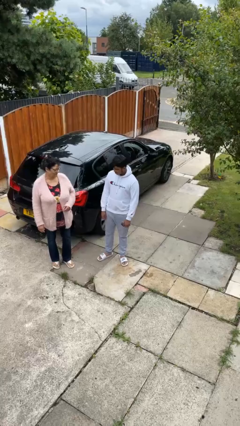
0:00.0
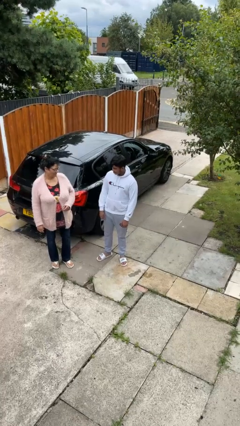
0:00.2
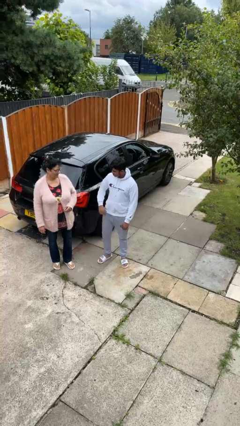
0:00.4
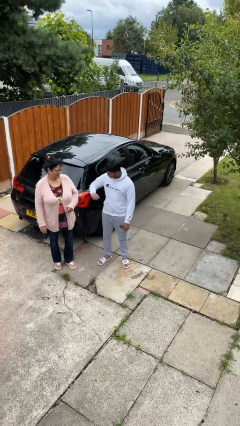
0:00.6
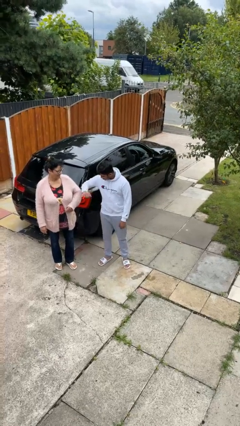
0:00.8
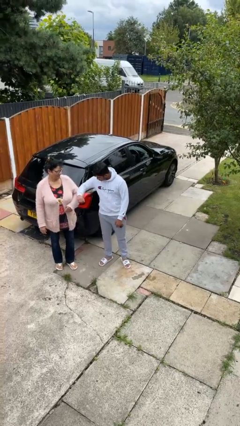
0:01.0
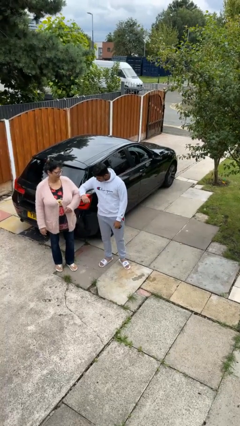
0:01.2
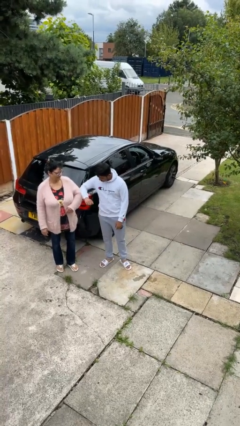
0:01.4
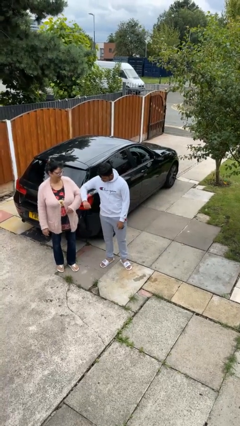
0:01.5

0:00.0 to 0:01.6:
person nudges person with elbow

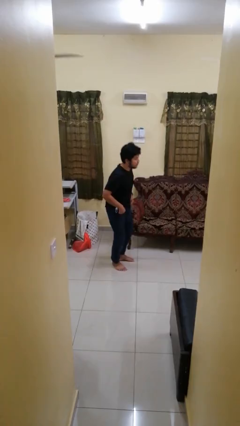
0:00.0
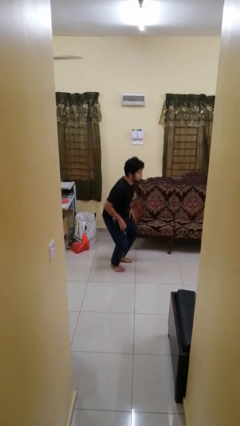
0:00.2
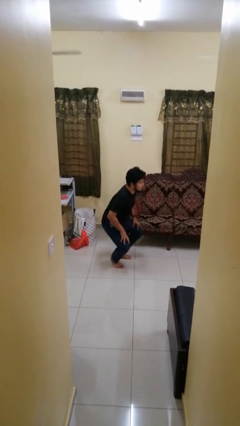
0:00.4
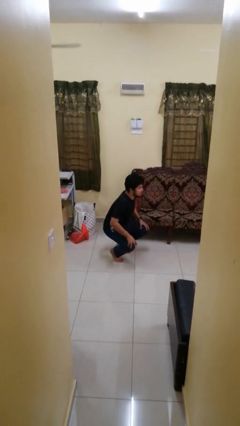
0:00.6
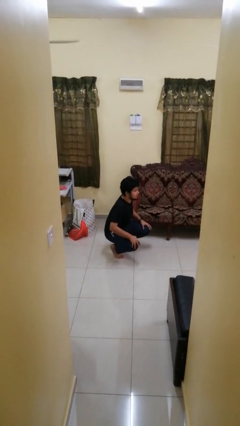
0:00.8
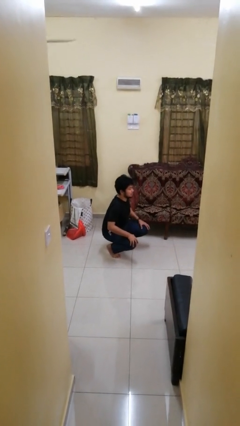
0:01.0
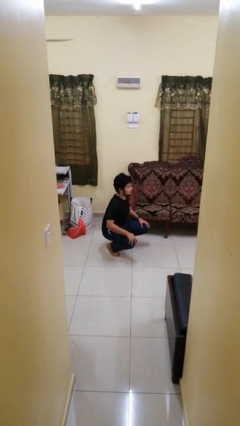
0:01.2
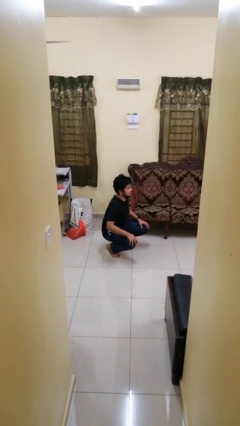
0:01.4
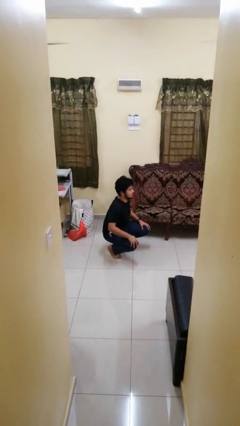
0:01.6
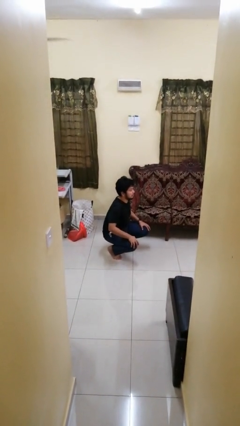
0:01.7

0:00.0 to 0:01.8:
person squats

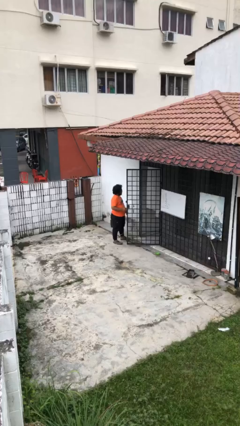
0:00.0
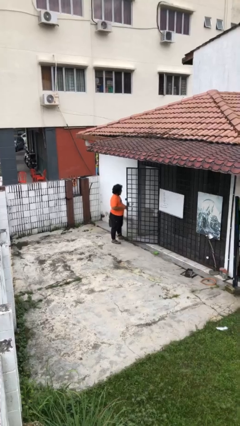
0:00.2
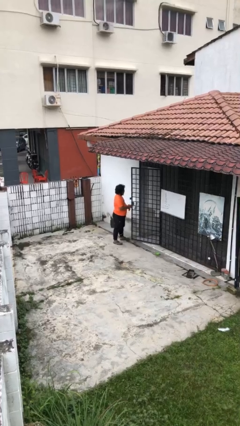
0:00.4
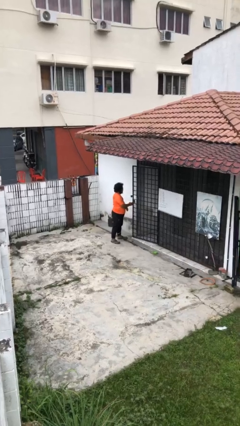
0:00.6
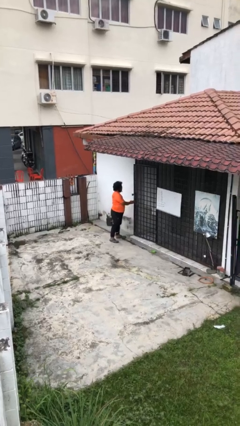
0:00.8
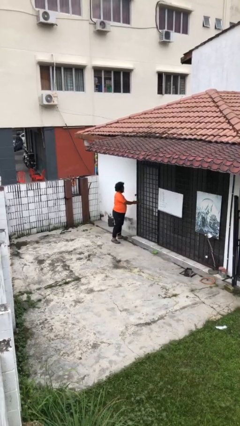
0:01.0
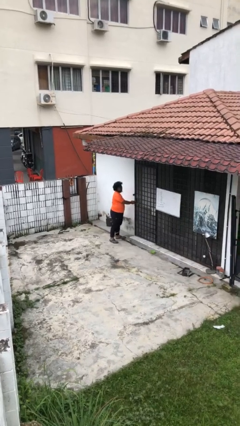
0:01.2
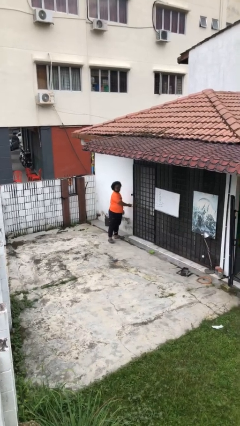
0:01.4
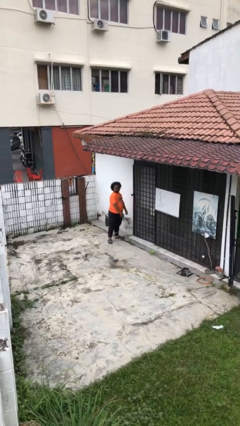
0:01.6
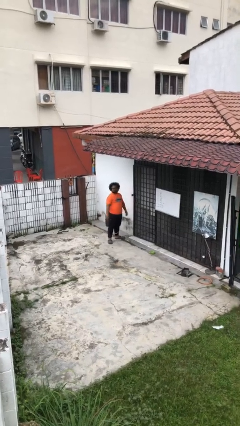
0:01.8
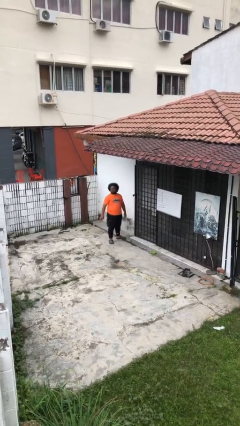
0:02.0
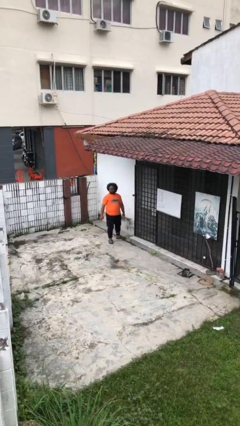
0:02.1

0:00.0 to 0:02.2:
person closes facility door

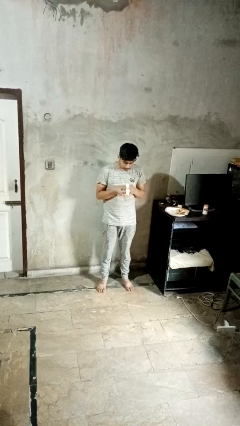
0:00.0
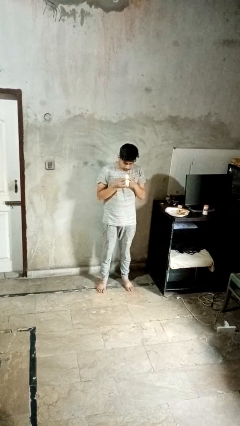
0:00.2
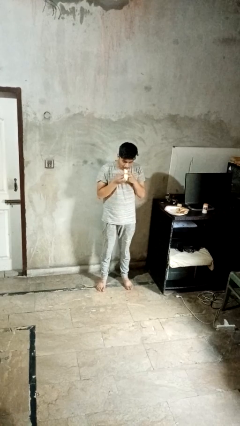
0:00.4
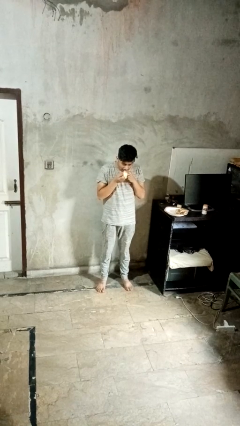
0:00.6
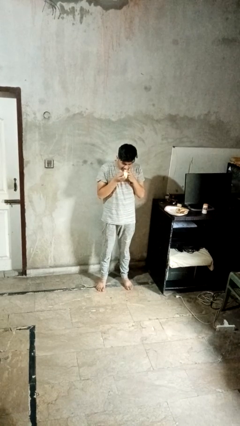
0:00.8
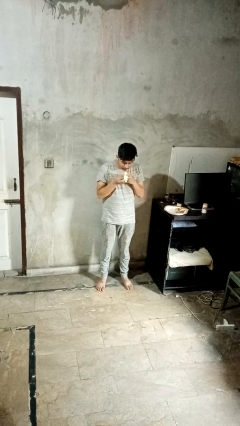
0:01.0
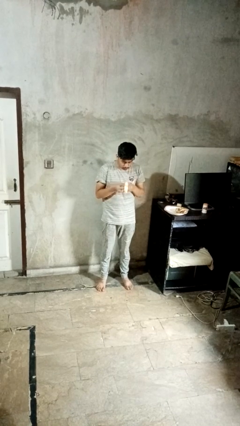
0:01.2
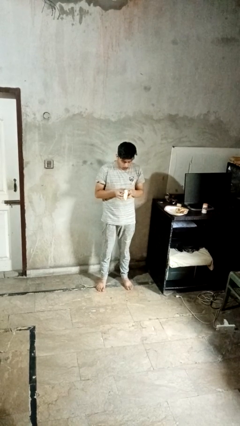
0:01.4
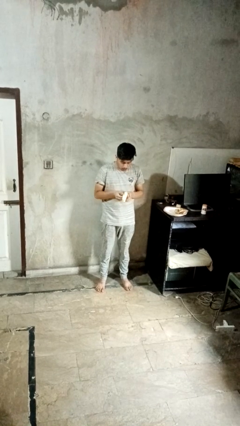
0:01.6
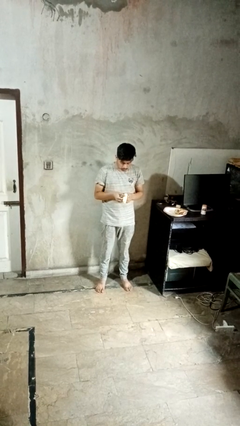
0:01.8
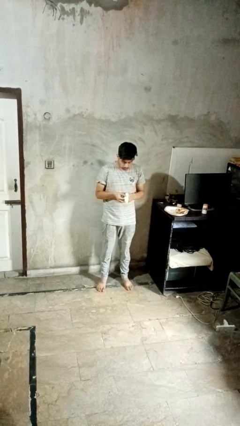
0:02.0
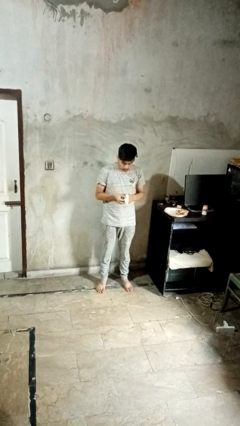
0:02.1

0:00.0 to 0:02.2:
person eats banana

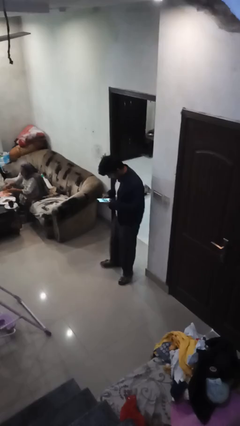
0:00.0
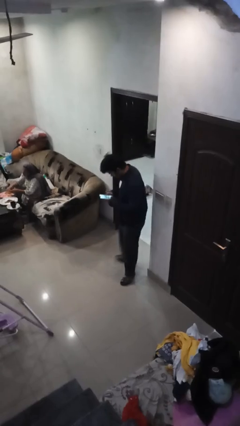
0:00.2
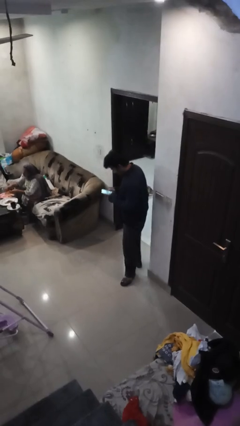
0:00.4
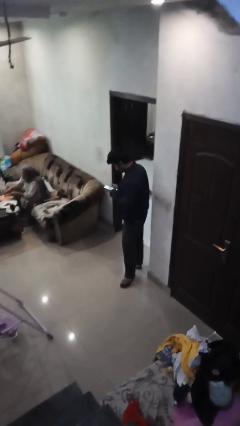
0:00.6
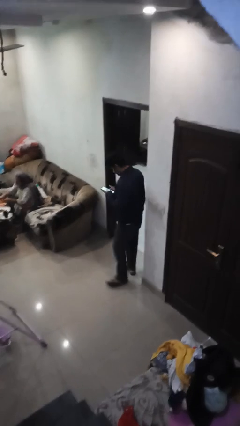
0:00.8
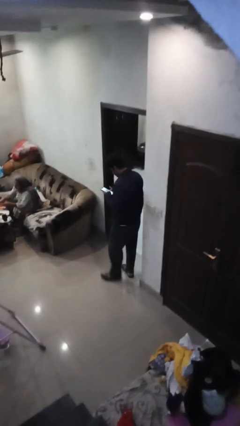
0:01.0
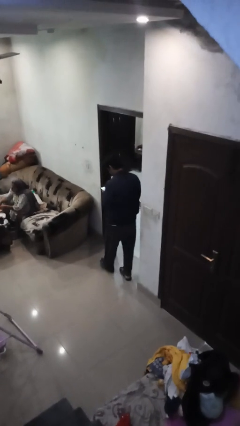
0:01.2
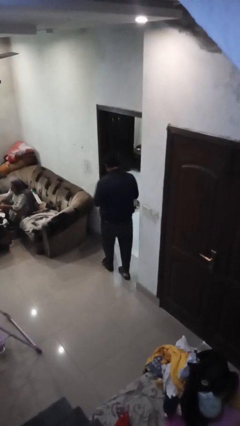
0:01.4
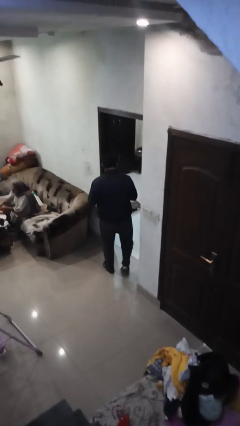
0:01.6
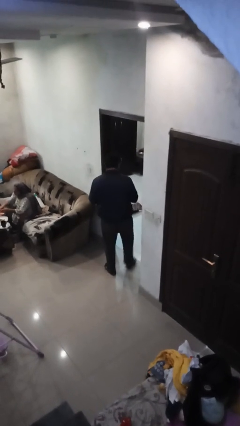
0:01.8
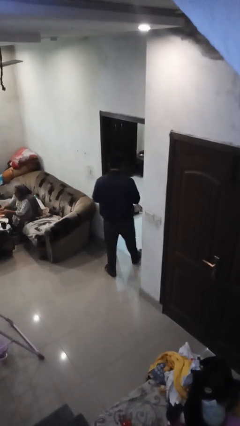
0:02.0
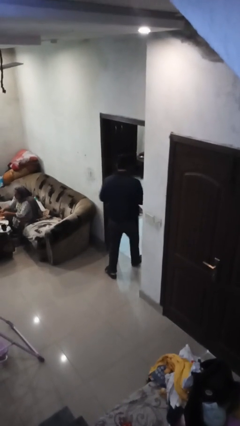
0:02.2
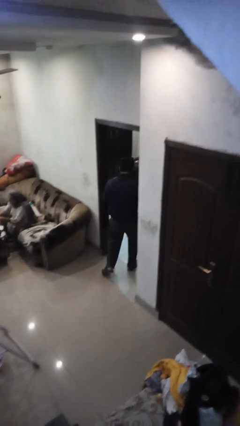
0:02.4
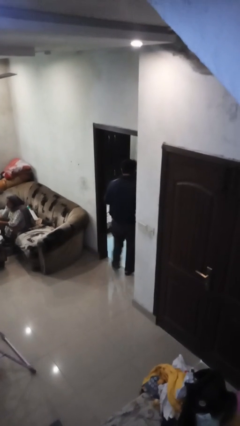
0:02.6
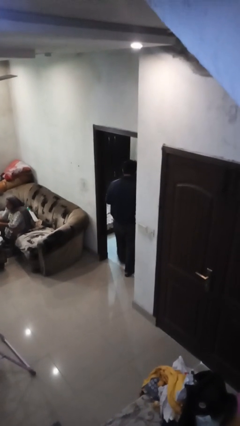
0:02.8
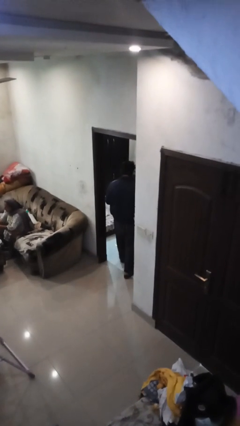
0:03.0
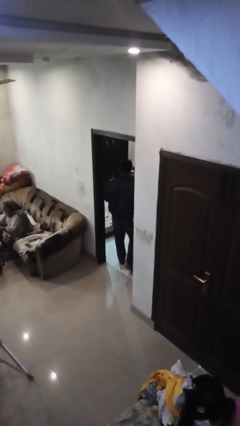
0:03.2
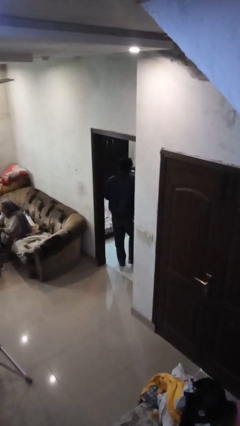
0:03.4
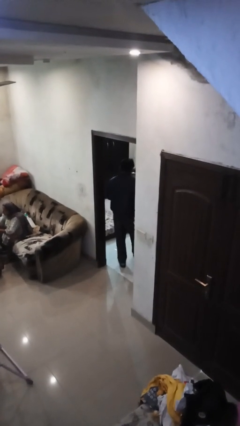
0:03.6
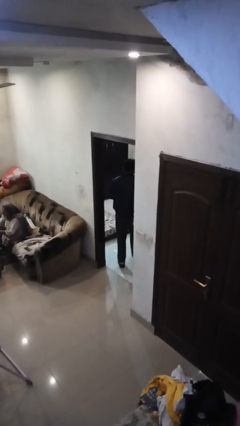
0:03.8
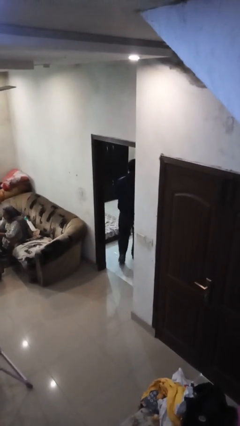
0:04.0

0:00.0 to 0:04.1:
person exits scene through structure

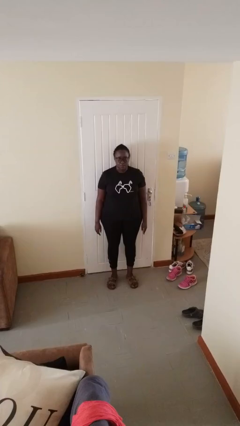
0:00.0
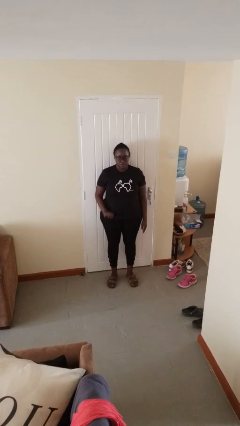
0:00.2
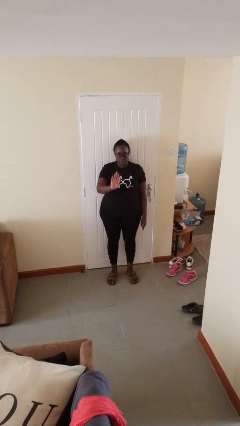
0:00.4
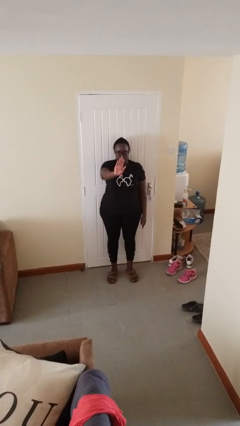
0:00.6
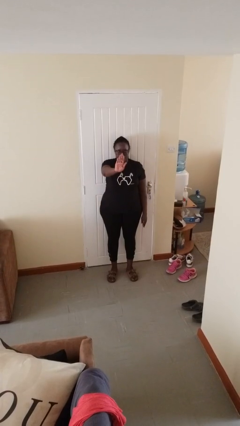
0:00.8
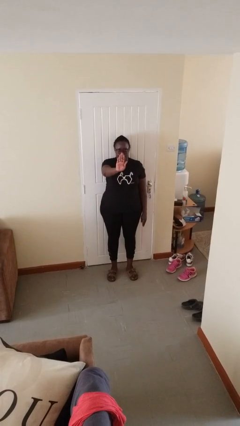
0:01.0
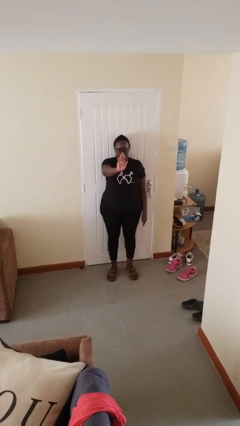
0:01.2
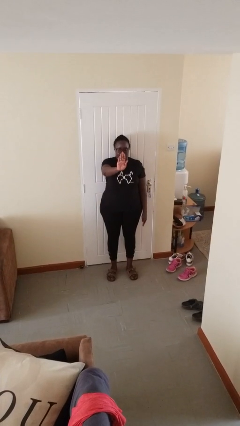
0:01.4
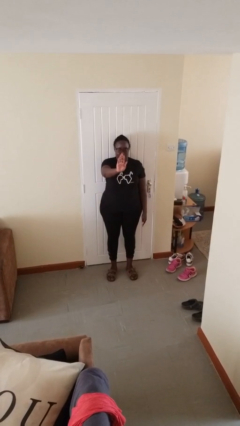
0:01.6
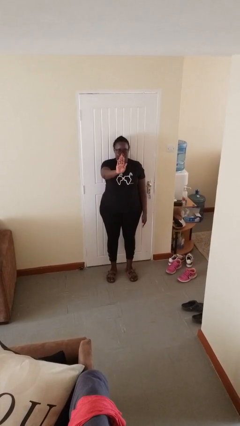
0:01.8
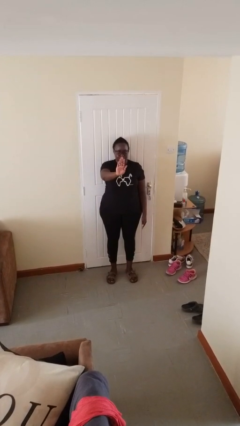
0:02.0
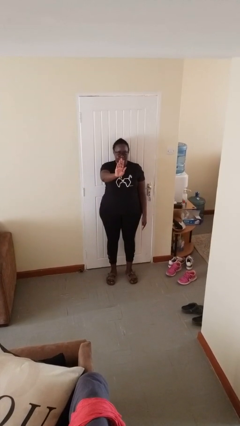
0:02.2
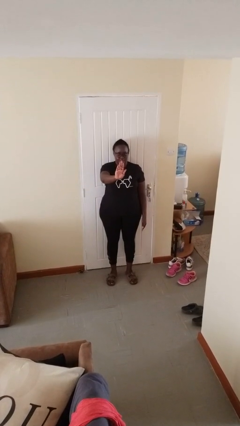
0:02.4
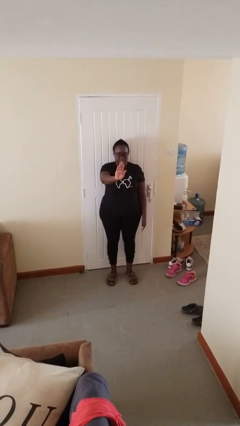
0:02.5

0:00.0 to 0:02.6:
person gestures stop

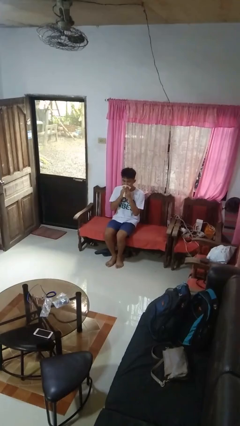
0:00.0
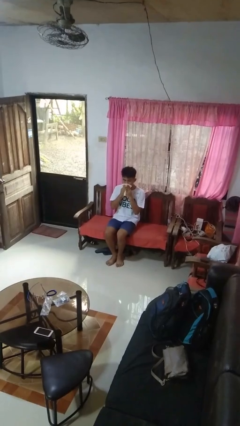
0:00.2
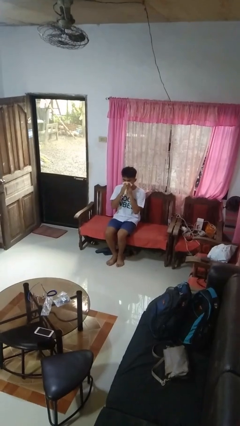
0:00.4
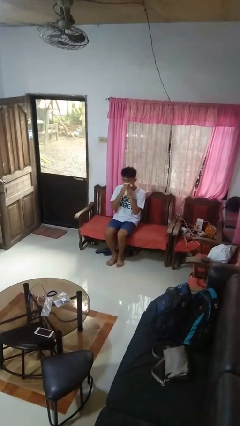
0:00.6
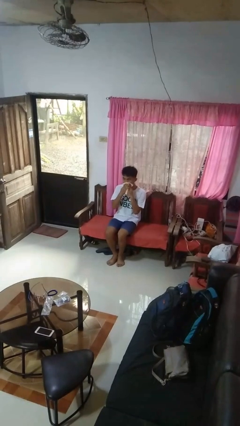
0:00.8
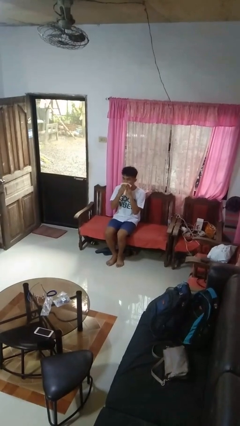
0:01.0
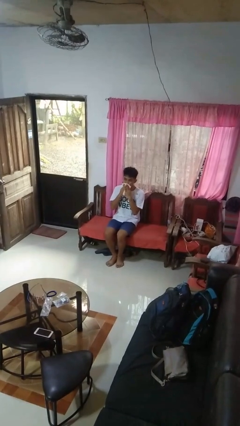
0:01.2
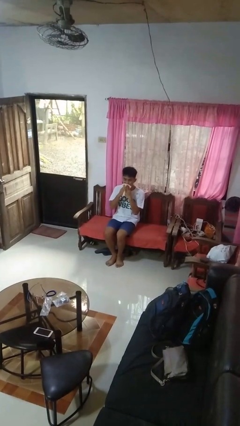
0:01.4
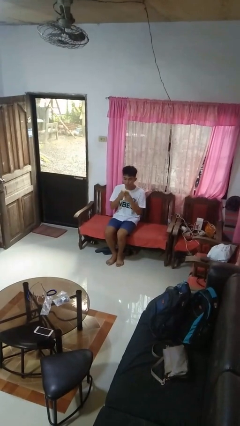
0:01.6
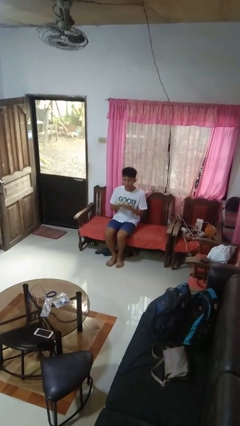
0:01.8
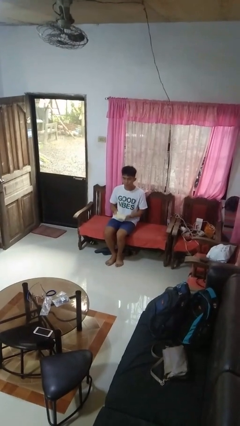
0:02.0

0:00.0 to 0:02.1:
person wipes mouth with napkin

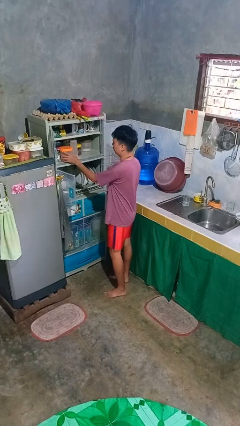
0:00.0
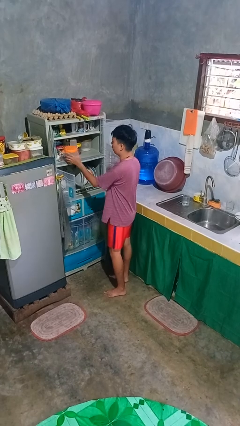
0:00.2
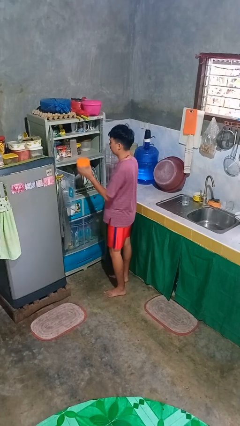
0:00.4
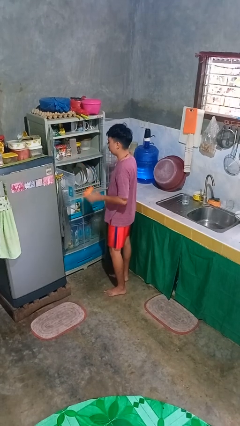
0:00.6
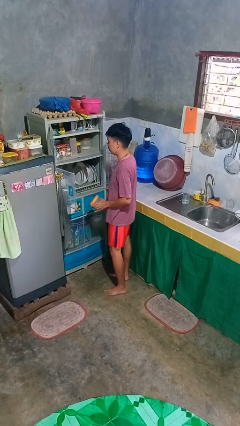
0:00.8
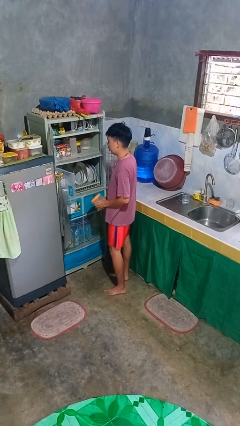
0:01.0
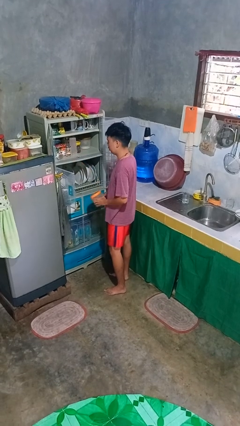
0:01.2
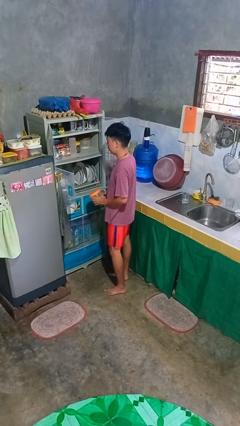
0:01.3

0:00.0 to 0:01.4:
person takes object from cabinet
